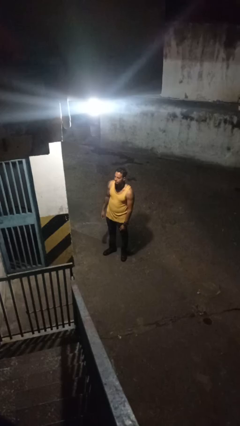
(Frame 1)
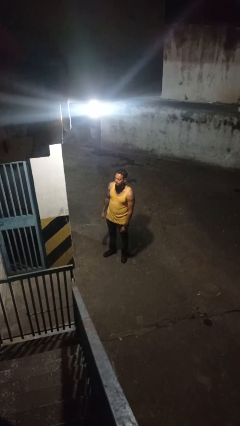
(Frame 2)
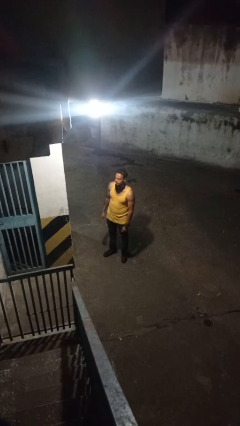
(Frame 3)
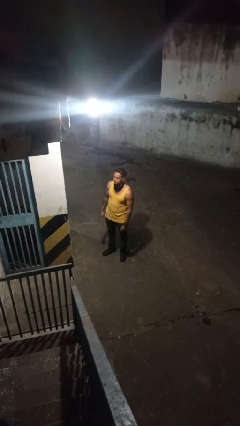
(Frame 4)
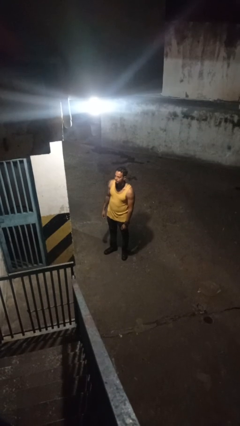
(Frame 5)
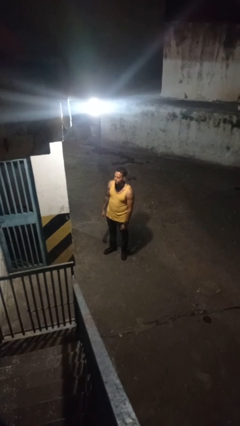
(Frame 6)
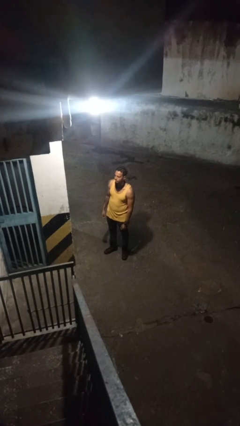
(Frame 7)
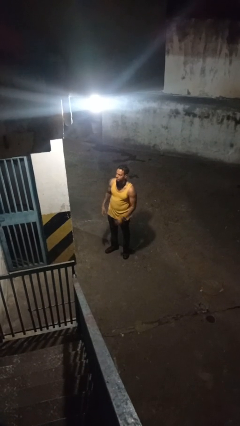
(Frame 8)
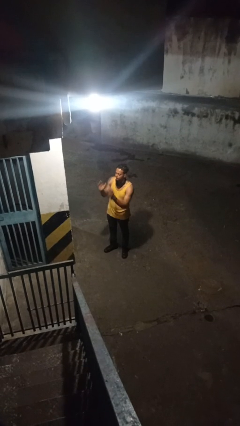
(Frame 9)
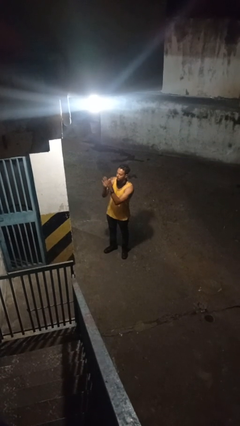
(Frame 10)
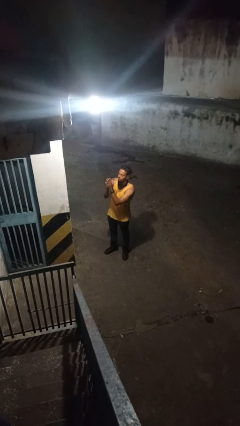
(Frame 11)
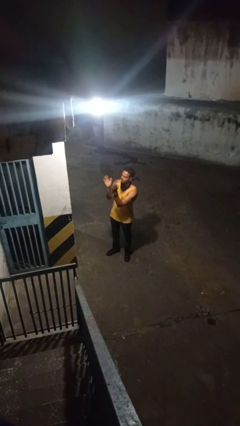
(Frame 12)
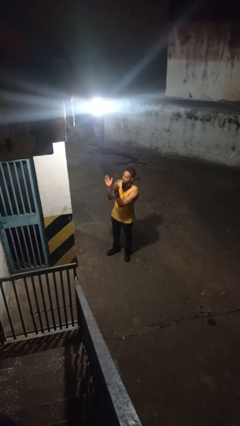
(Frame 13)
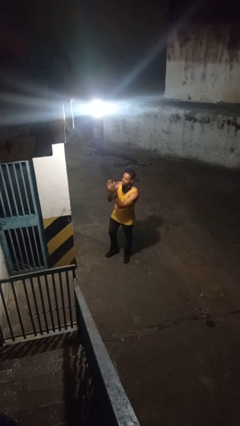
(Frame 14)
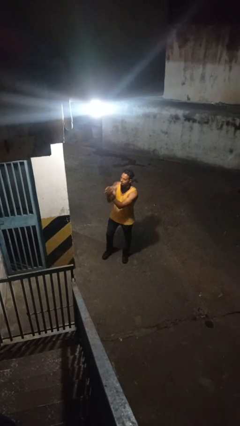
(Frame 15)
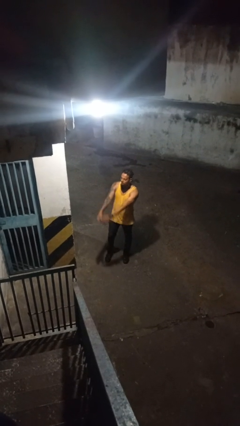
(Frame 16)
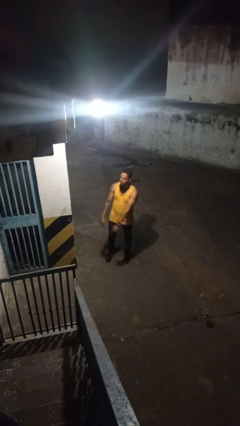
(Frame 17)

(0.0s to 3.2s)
person claps hands

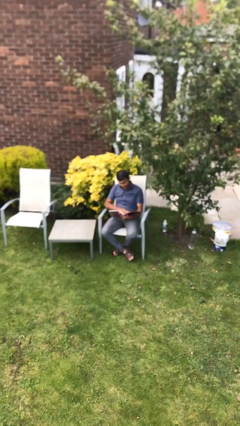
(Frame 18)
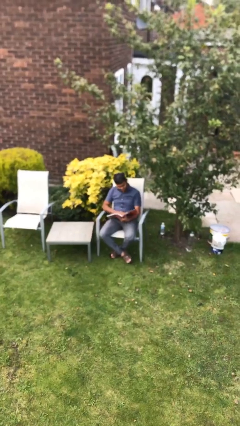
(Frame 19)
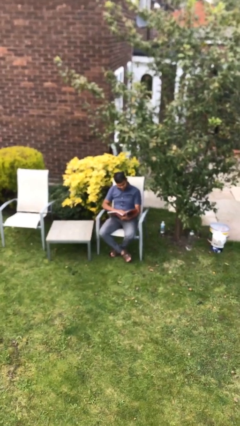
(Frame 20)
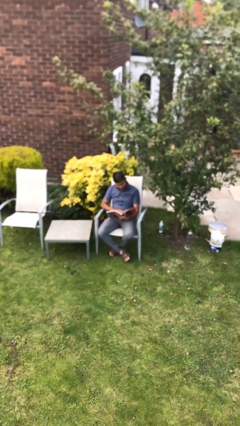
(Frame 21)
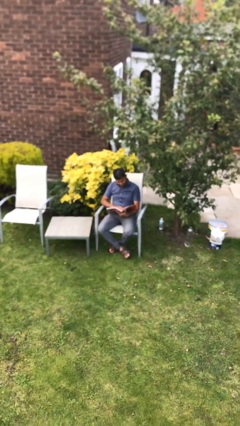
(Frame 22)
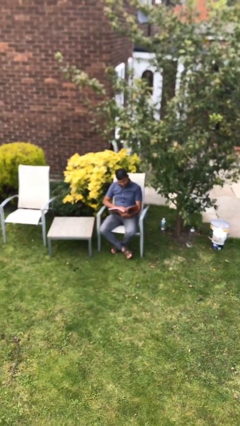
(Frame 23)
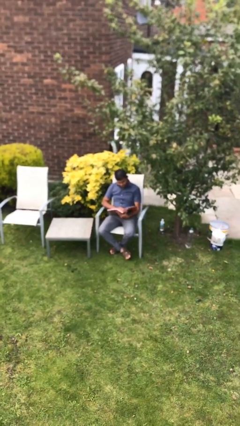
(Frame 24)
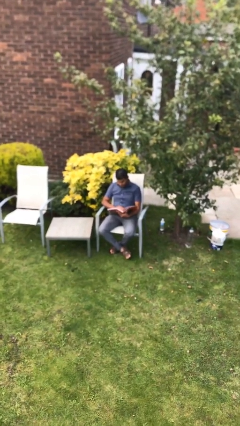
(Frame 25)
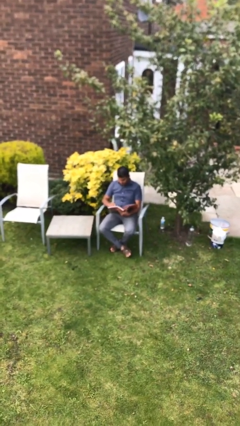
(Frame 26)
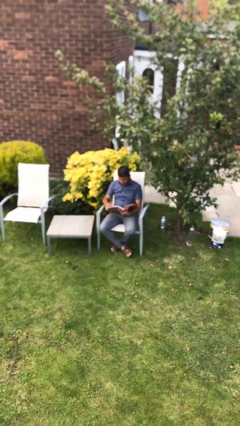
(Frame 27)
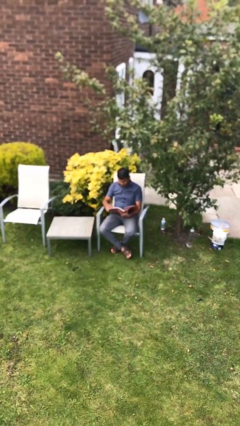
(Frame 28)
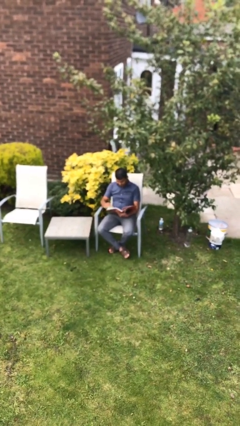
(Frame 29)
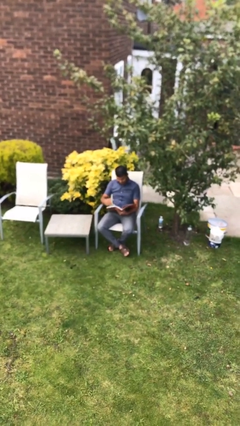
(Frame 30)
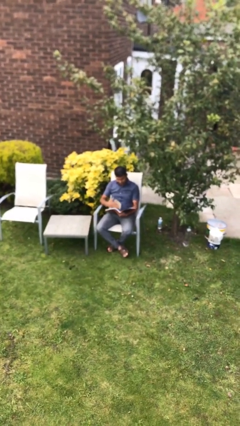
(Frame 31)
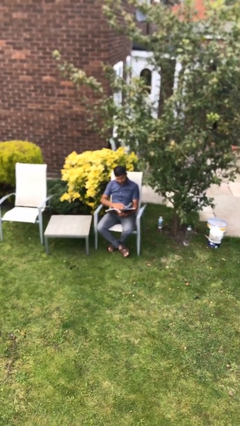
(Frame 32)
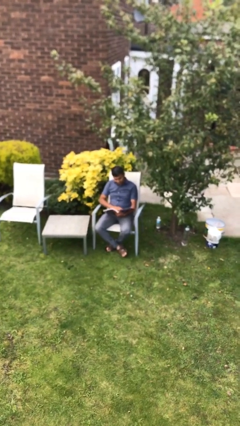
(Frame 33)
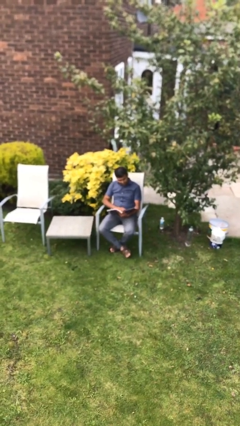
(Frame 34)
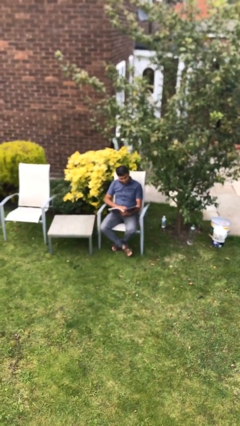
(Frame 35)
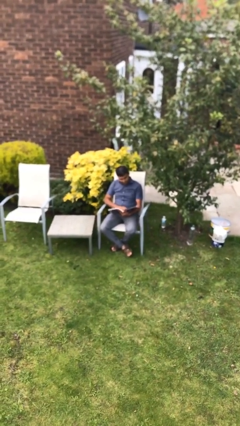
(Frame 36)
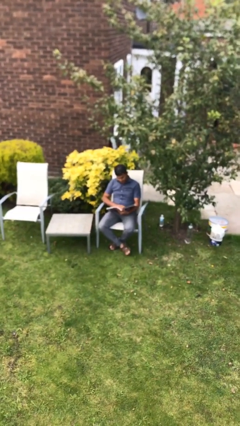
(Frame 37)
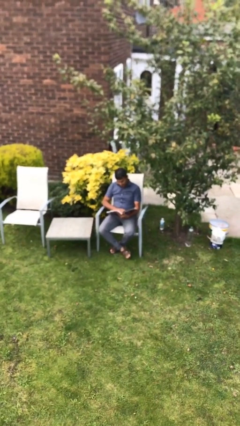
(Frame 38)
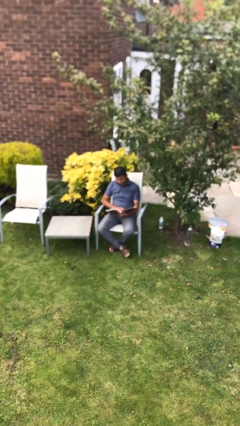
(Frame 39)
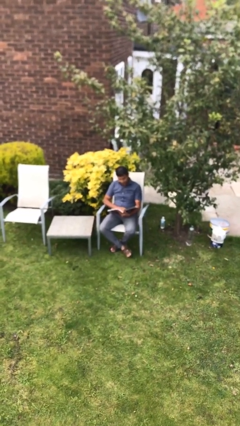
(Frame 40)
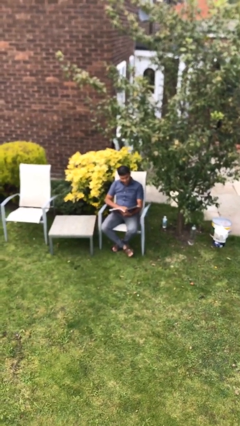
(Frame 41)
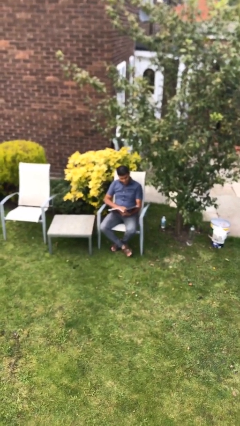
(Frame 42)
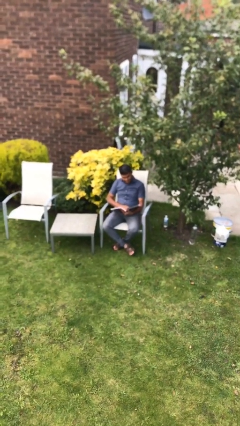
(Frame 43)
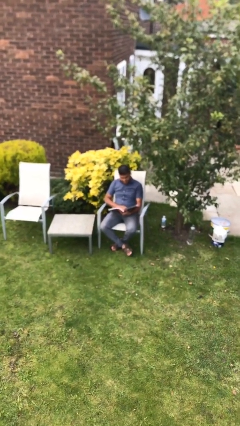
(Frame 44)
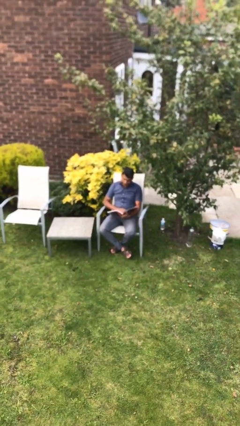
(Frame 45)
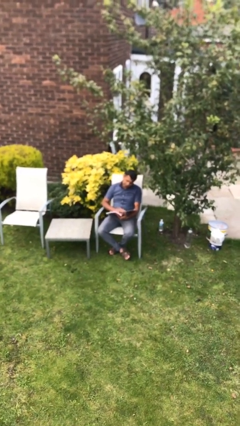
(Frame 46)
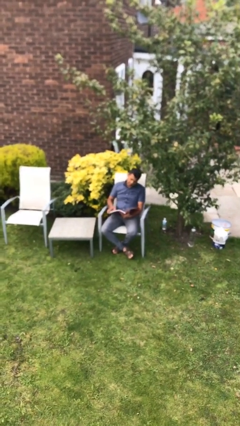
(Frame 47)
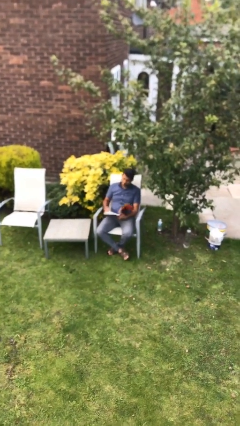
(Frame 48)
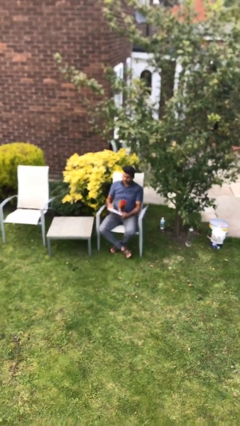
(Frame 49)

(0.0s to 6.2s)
person reads document

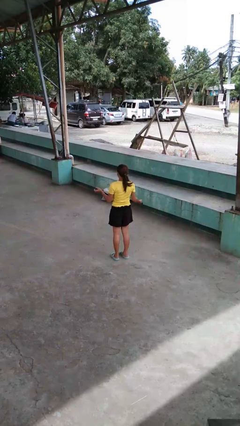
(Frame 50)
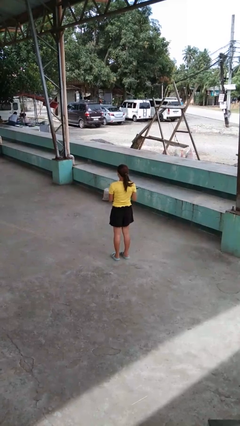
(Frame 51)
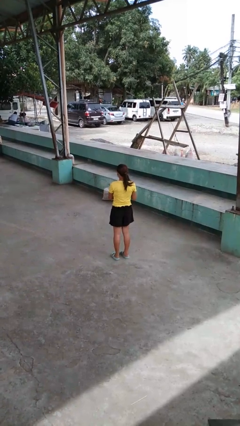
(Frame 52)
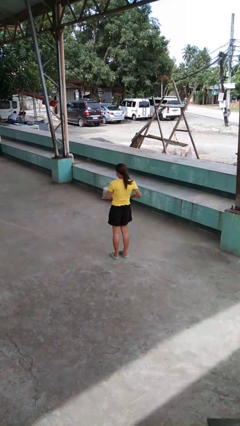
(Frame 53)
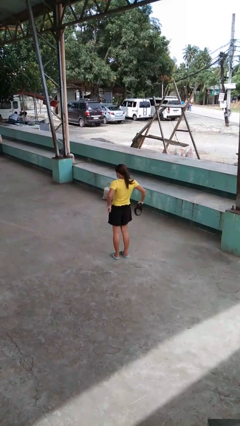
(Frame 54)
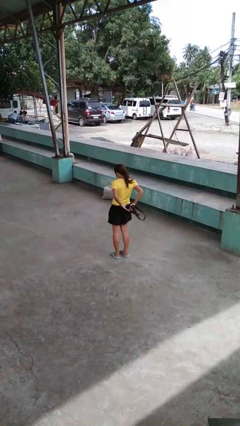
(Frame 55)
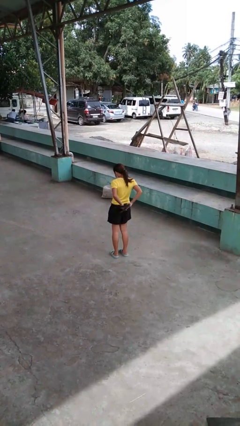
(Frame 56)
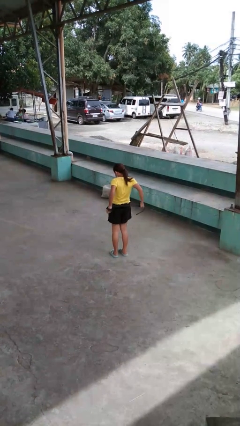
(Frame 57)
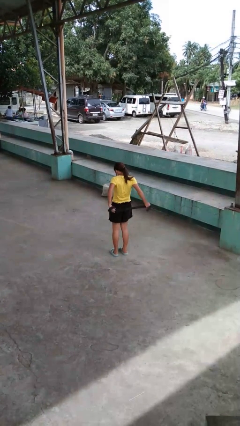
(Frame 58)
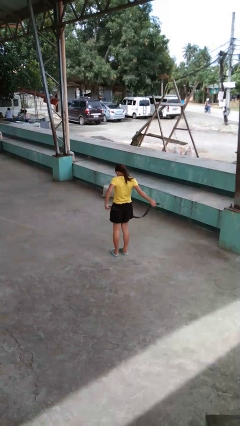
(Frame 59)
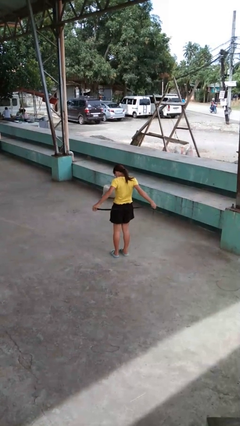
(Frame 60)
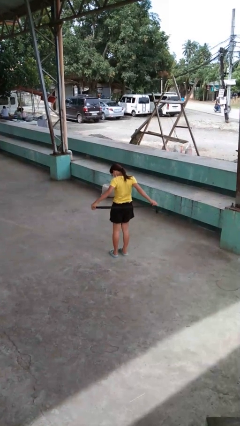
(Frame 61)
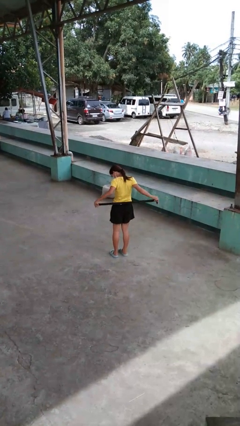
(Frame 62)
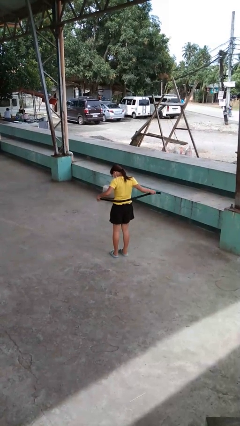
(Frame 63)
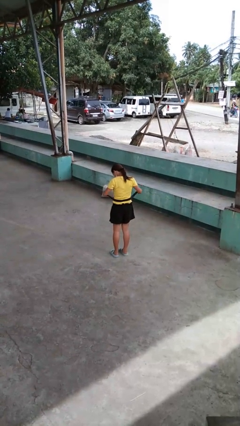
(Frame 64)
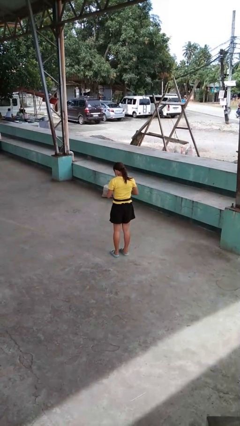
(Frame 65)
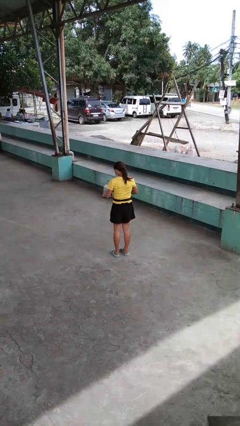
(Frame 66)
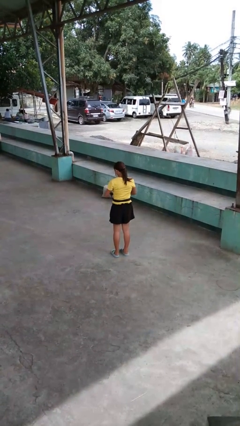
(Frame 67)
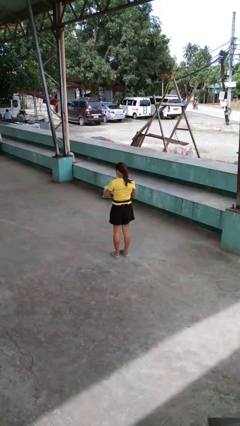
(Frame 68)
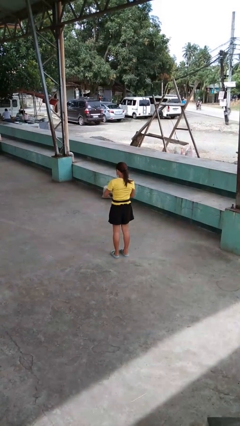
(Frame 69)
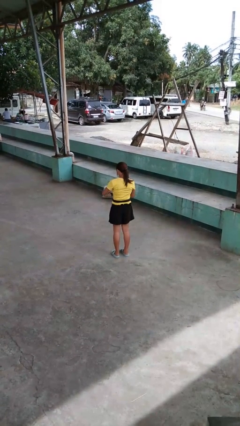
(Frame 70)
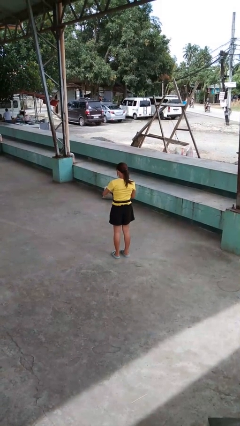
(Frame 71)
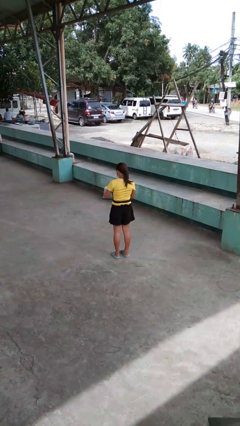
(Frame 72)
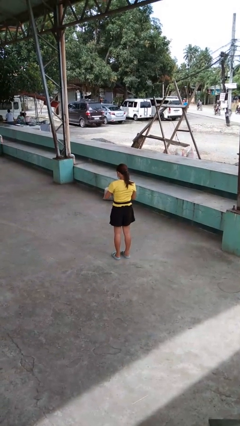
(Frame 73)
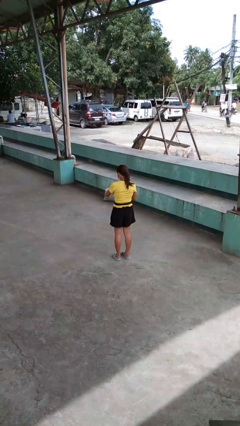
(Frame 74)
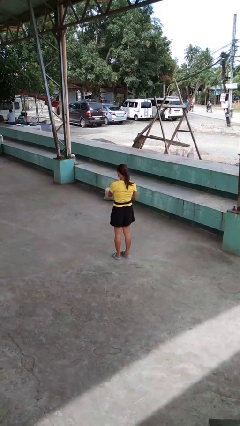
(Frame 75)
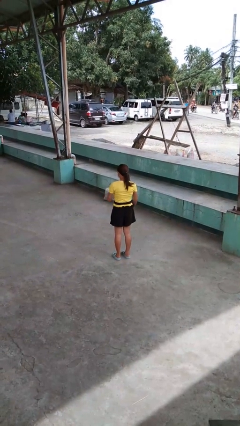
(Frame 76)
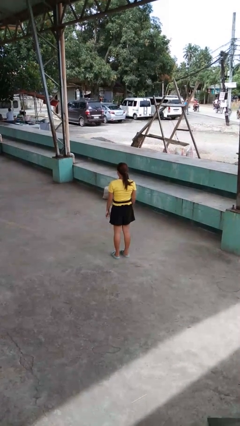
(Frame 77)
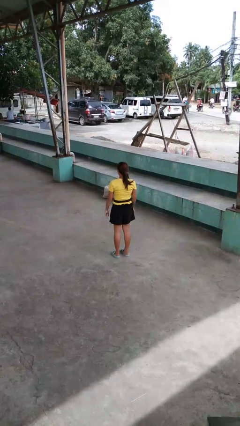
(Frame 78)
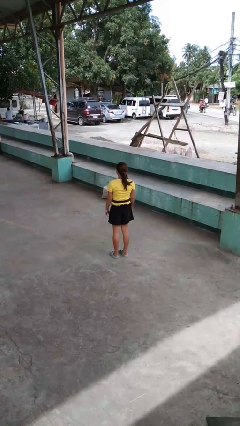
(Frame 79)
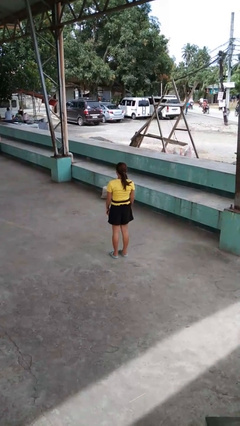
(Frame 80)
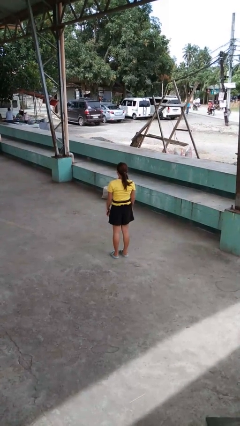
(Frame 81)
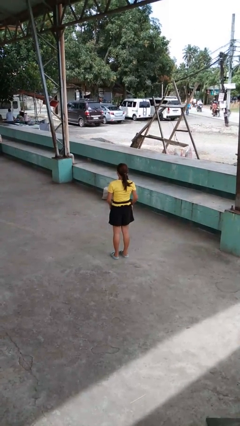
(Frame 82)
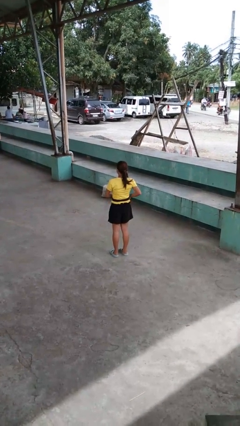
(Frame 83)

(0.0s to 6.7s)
person puts on belt

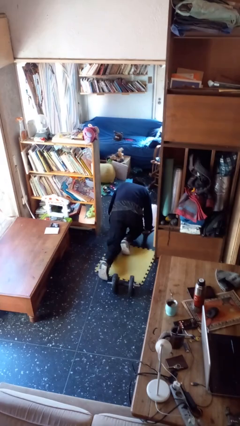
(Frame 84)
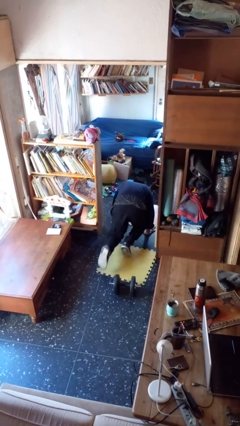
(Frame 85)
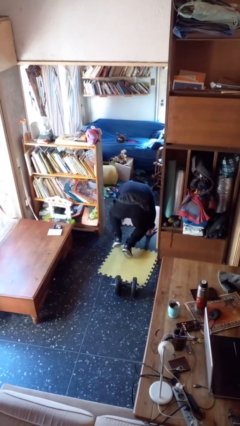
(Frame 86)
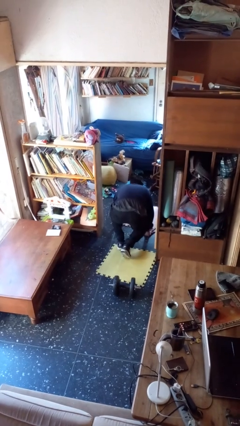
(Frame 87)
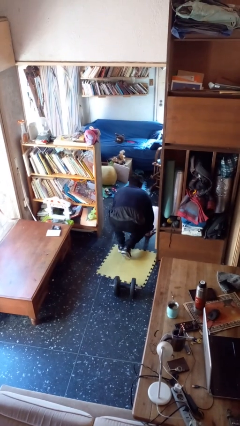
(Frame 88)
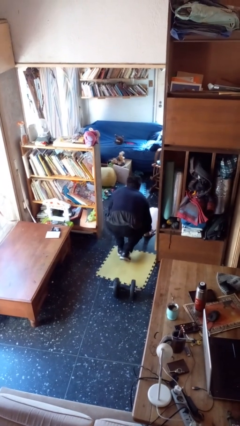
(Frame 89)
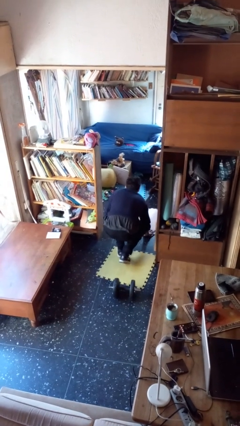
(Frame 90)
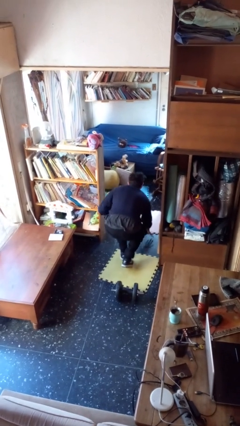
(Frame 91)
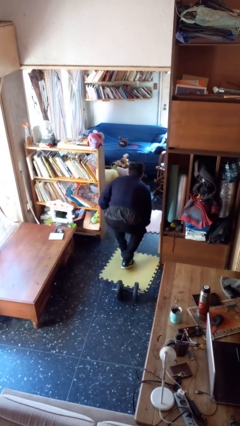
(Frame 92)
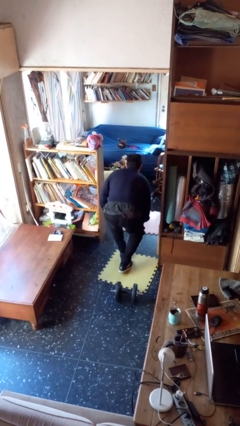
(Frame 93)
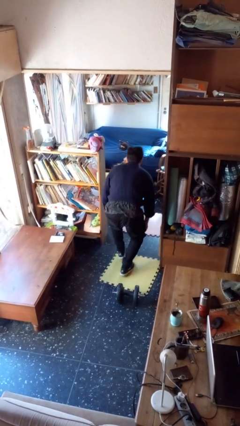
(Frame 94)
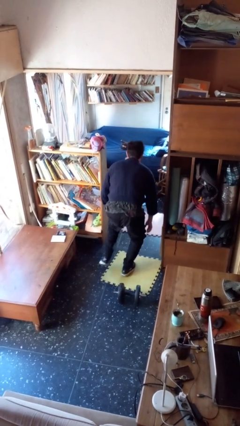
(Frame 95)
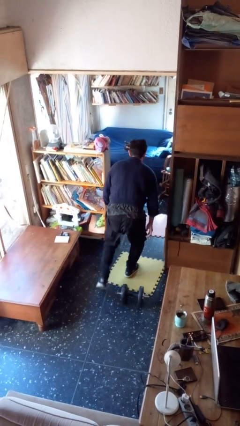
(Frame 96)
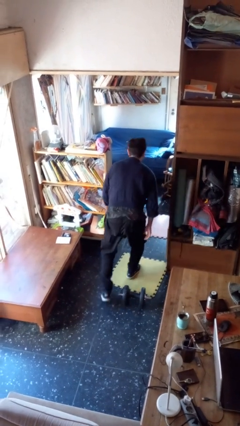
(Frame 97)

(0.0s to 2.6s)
person stands up from floor
